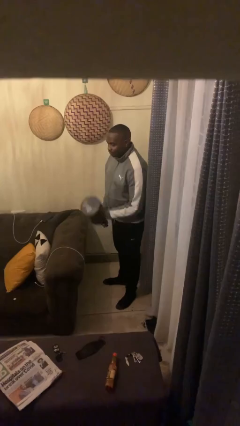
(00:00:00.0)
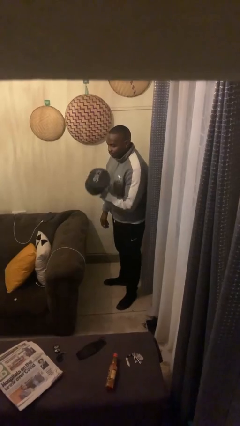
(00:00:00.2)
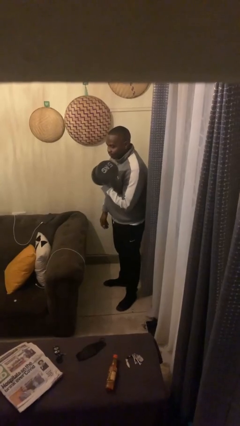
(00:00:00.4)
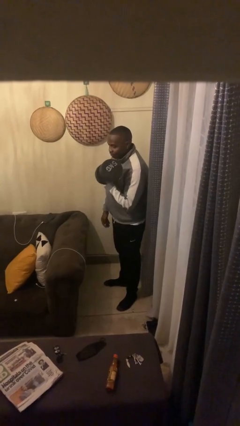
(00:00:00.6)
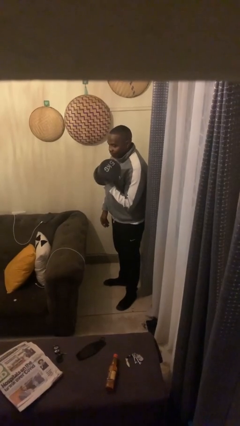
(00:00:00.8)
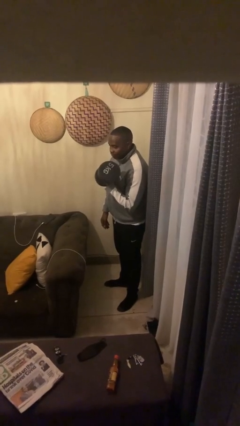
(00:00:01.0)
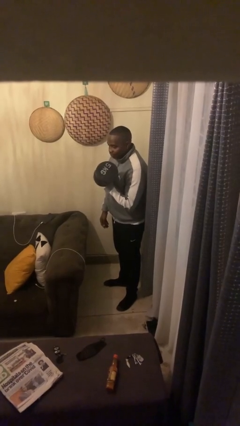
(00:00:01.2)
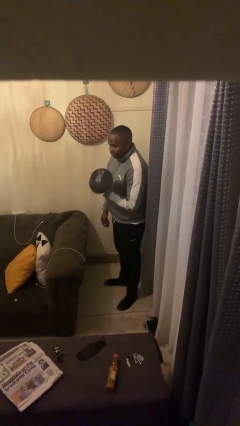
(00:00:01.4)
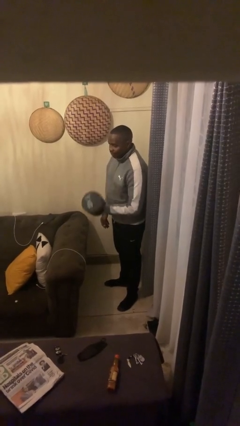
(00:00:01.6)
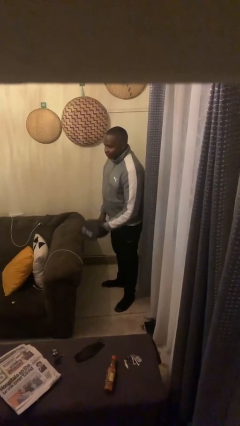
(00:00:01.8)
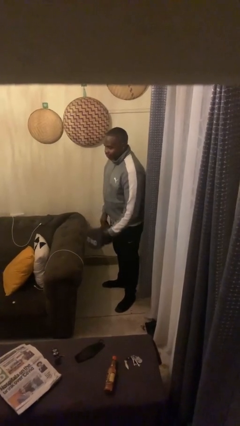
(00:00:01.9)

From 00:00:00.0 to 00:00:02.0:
person lifts dumbbells

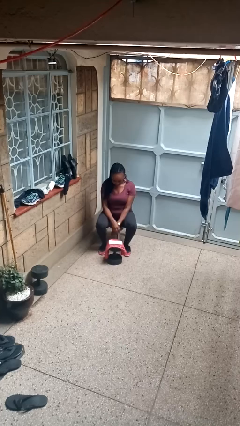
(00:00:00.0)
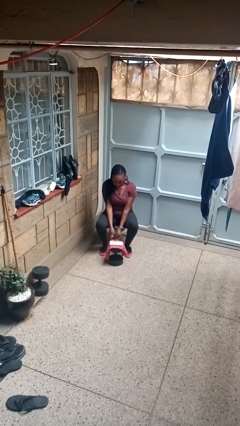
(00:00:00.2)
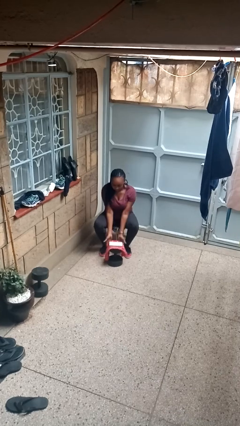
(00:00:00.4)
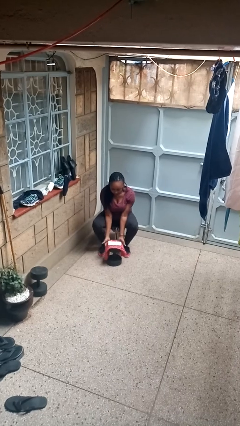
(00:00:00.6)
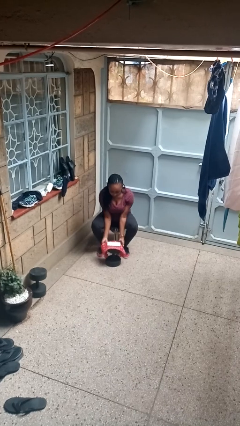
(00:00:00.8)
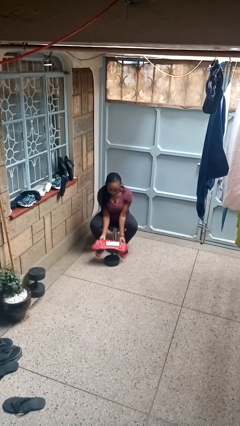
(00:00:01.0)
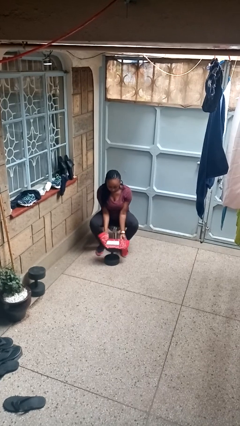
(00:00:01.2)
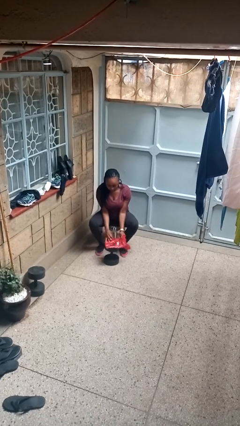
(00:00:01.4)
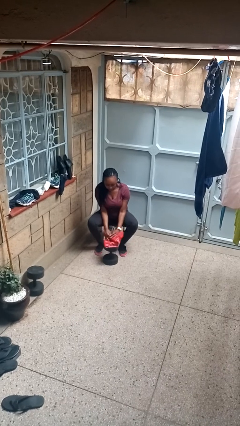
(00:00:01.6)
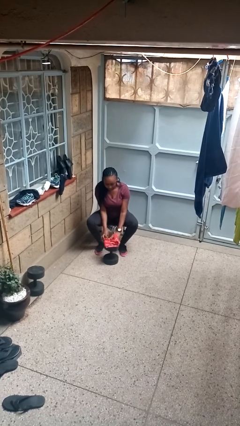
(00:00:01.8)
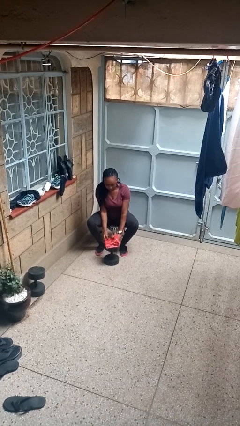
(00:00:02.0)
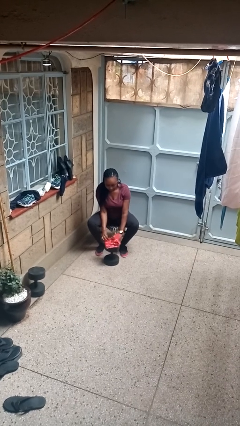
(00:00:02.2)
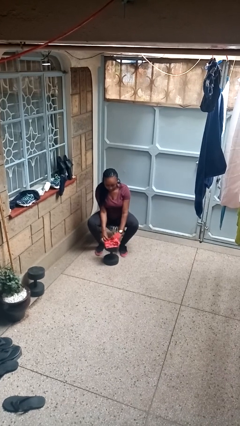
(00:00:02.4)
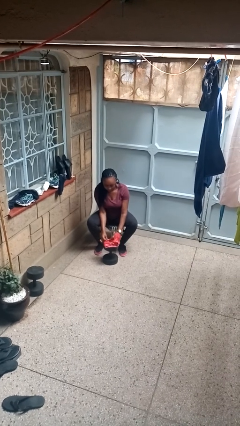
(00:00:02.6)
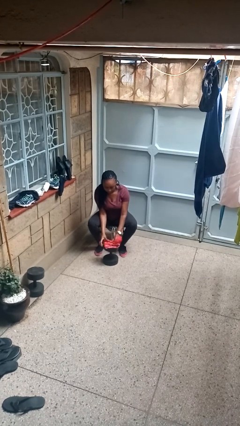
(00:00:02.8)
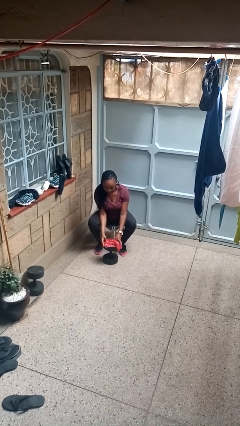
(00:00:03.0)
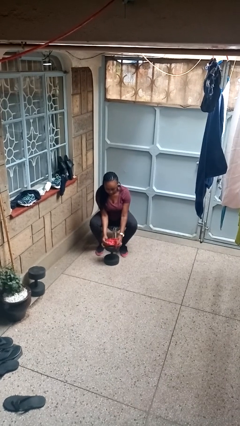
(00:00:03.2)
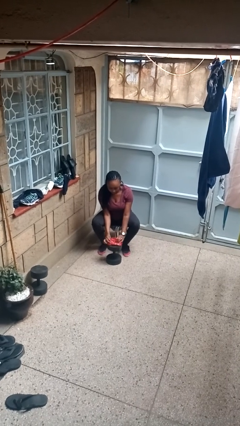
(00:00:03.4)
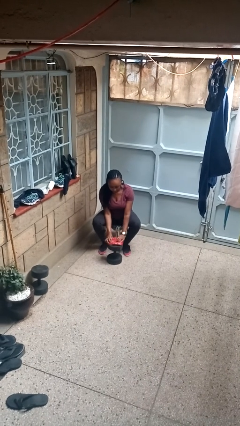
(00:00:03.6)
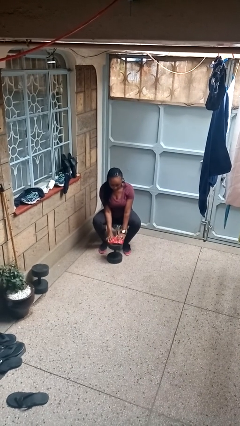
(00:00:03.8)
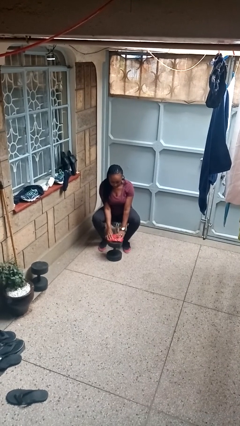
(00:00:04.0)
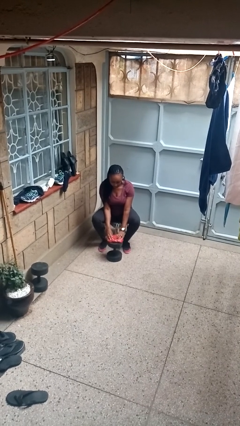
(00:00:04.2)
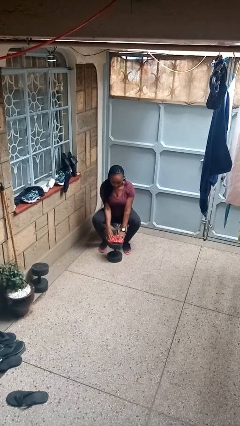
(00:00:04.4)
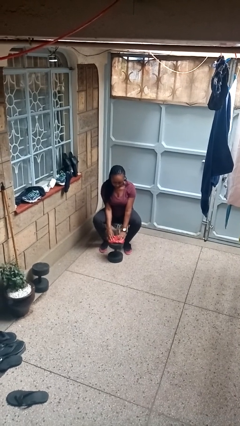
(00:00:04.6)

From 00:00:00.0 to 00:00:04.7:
person wraps box

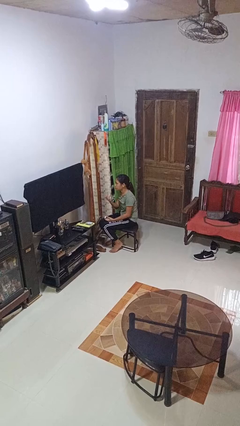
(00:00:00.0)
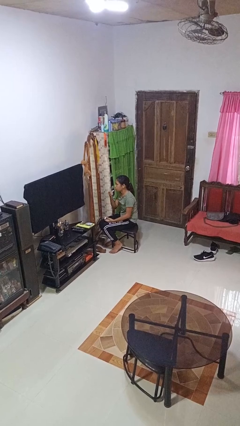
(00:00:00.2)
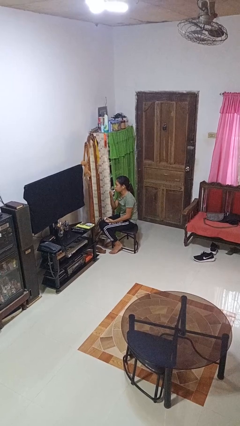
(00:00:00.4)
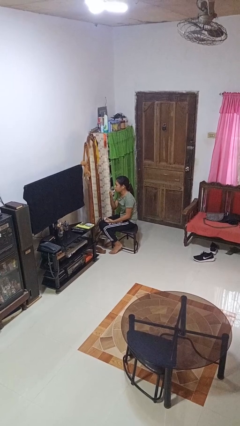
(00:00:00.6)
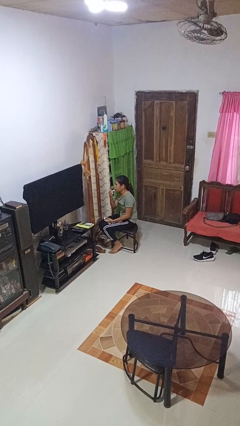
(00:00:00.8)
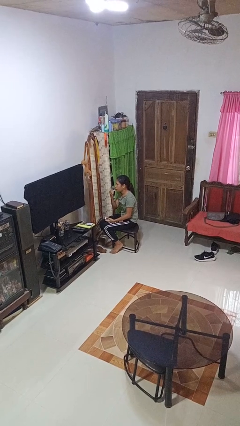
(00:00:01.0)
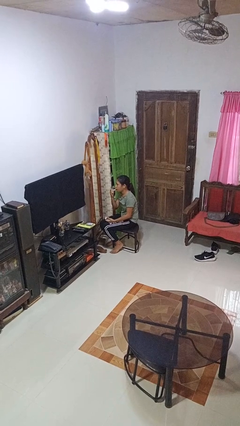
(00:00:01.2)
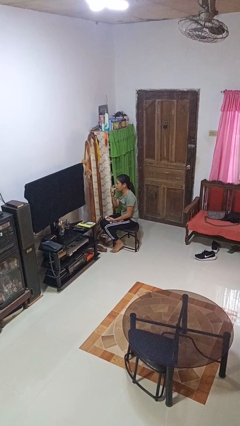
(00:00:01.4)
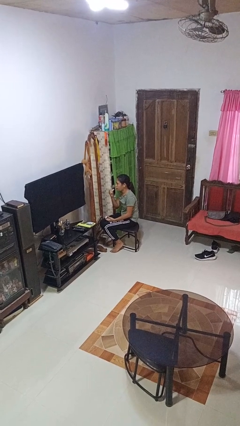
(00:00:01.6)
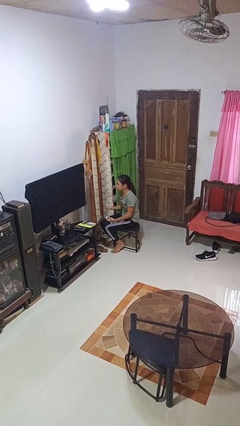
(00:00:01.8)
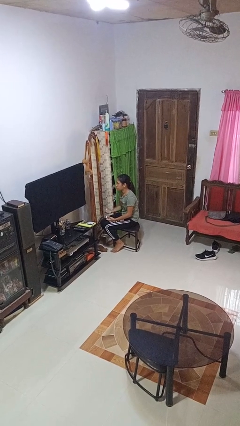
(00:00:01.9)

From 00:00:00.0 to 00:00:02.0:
person applies lip makeup

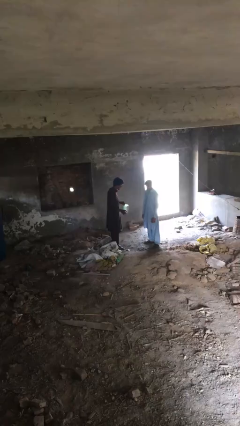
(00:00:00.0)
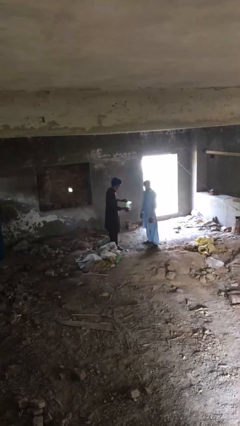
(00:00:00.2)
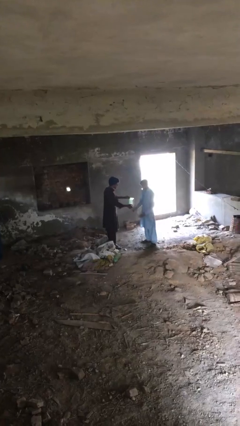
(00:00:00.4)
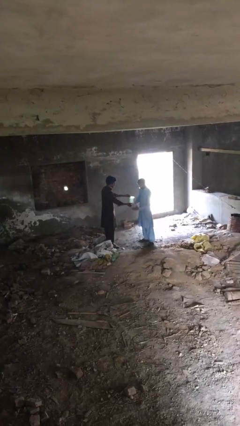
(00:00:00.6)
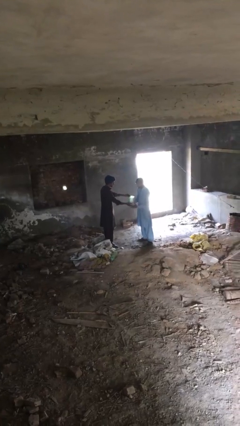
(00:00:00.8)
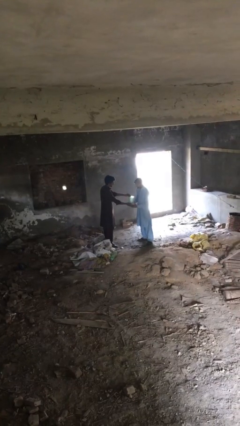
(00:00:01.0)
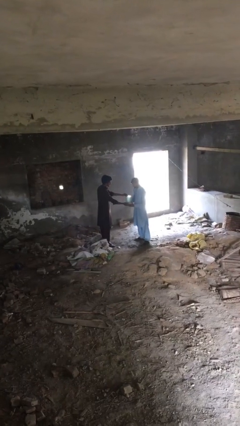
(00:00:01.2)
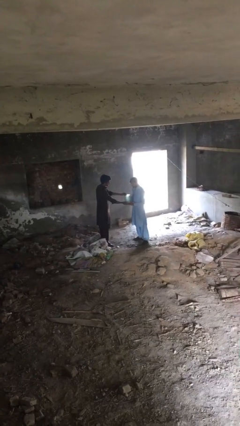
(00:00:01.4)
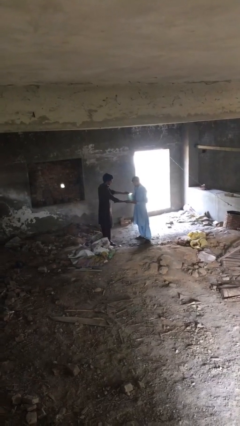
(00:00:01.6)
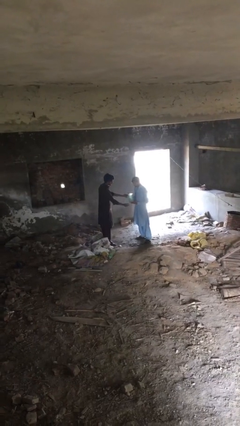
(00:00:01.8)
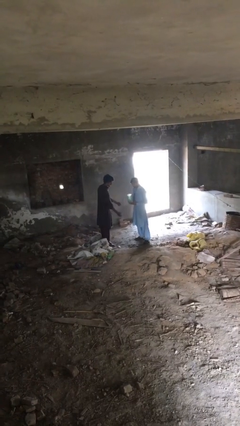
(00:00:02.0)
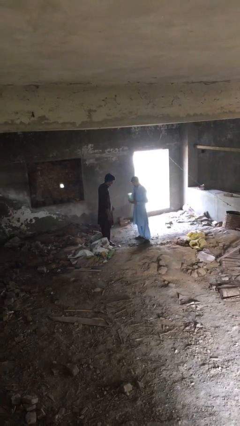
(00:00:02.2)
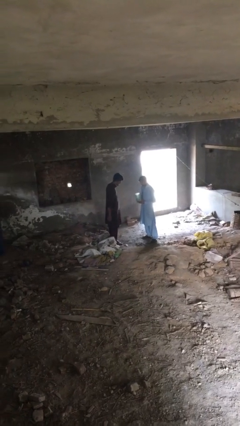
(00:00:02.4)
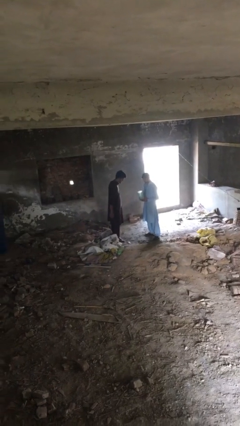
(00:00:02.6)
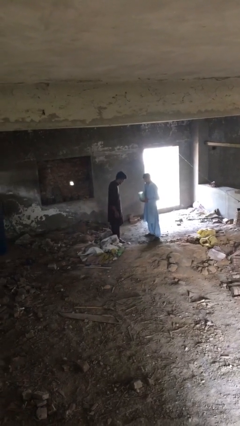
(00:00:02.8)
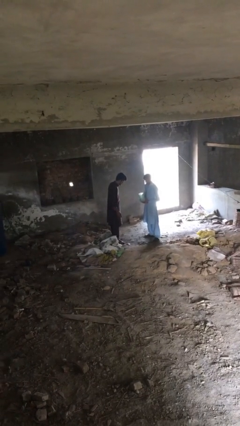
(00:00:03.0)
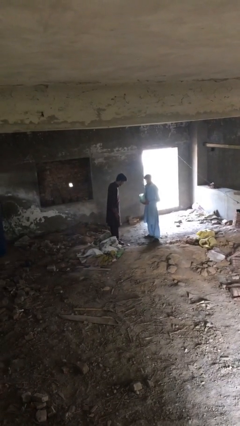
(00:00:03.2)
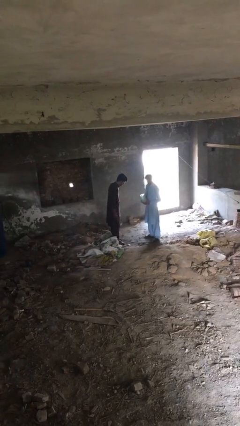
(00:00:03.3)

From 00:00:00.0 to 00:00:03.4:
person transfers object to person

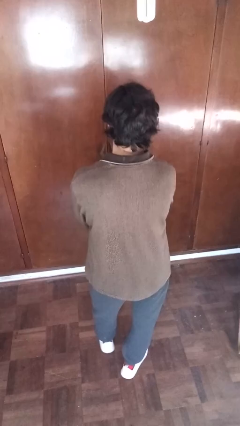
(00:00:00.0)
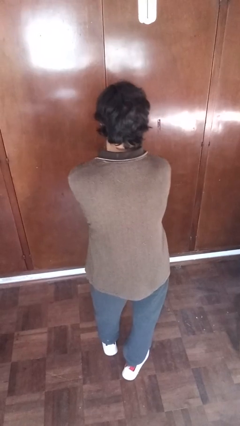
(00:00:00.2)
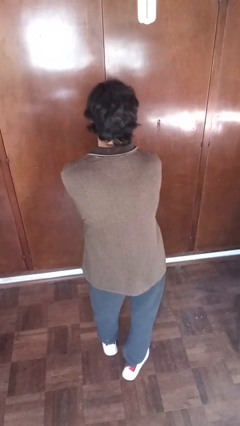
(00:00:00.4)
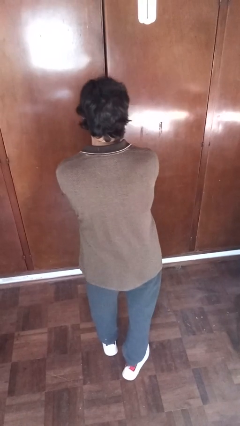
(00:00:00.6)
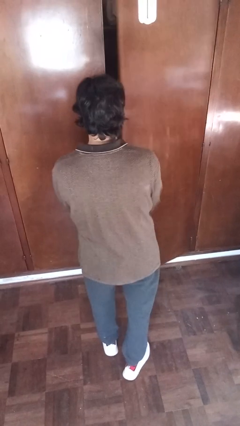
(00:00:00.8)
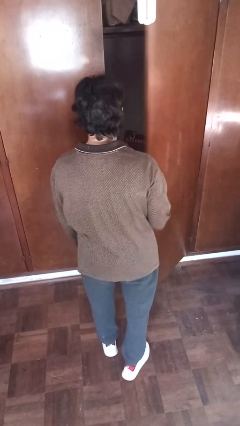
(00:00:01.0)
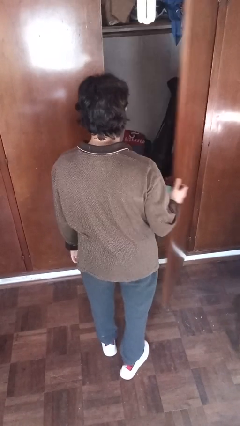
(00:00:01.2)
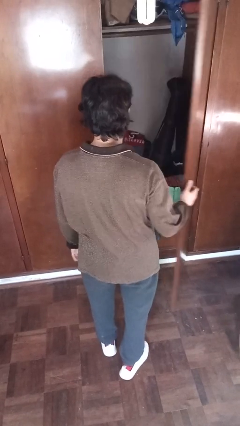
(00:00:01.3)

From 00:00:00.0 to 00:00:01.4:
person opens closet door

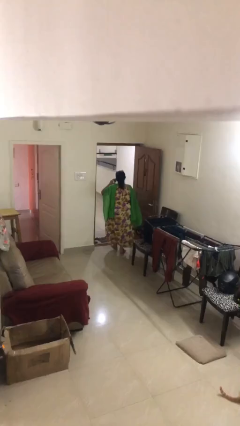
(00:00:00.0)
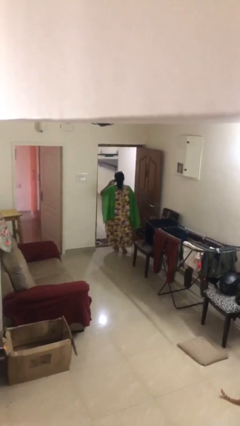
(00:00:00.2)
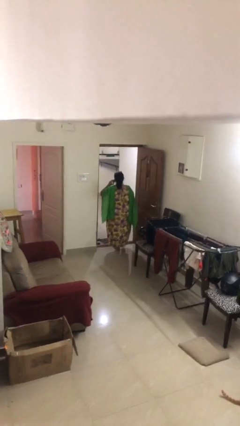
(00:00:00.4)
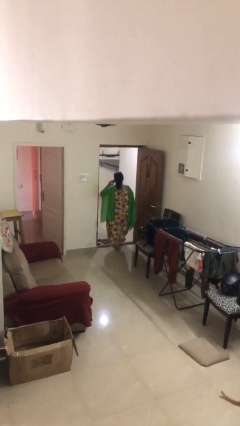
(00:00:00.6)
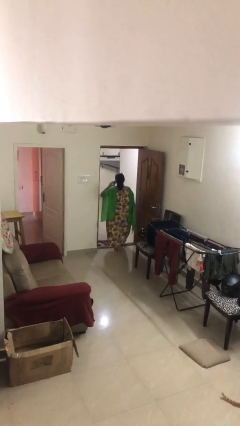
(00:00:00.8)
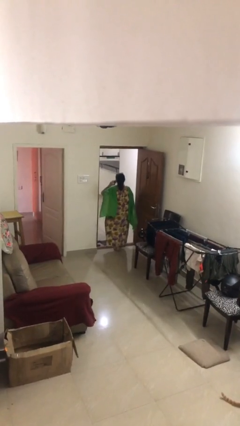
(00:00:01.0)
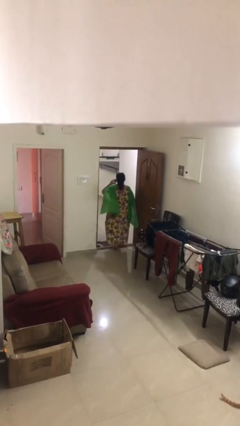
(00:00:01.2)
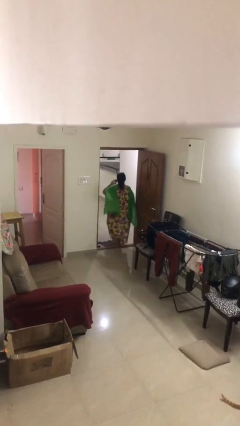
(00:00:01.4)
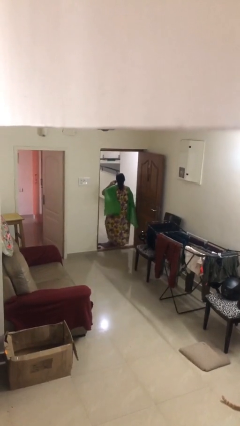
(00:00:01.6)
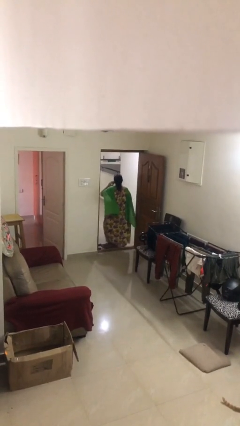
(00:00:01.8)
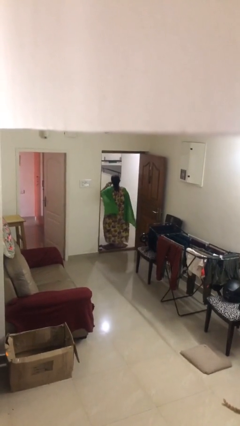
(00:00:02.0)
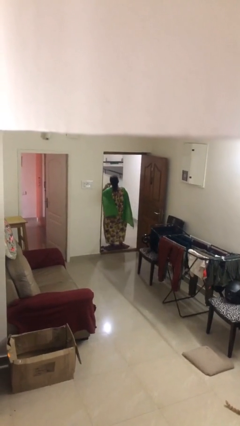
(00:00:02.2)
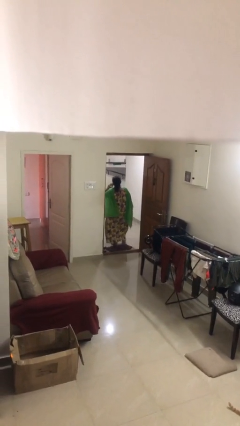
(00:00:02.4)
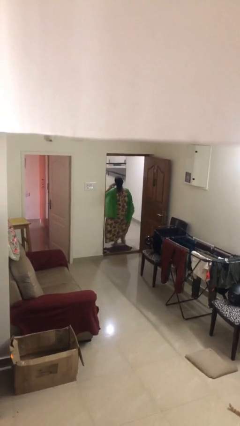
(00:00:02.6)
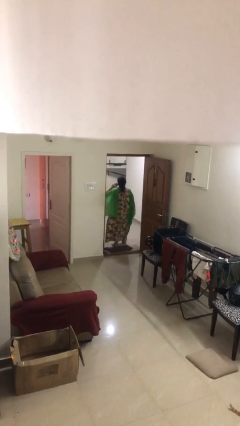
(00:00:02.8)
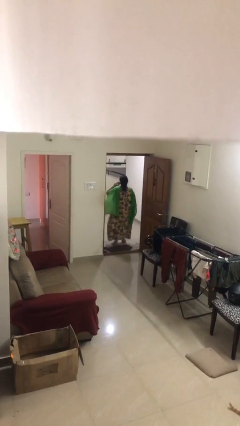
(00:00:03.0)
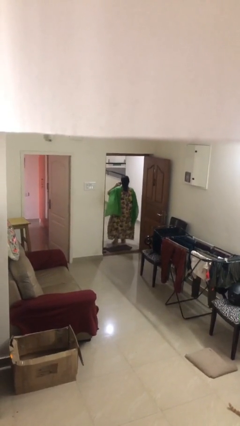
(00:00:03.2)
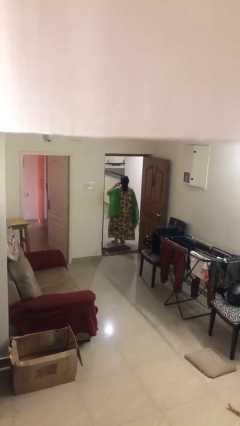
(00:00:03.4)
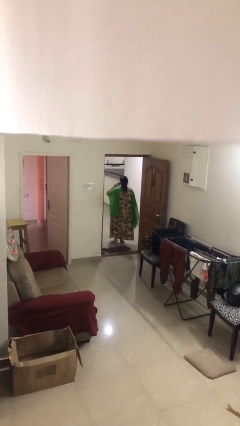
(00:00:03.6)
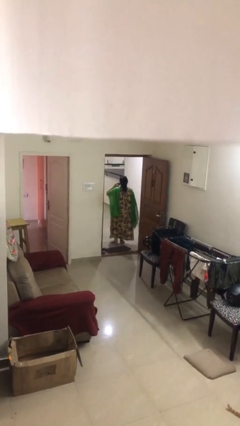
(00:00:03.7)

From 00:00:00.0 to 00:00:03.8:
person exits scene through structure
